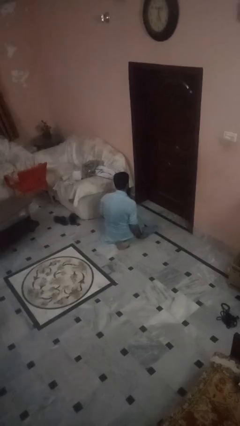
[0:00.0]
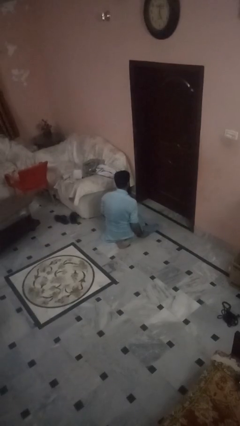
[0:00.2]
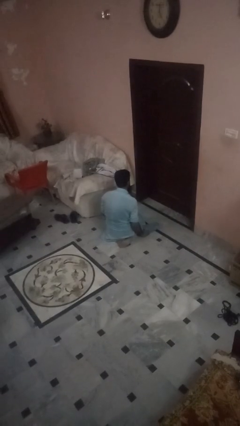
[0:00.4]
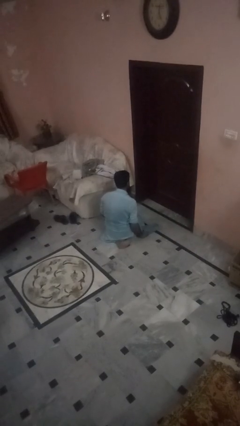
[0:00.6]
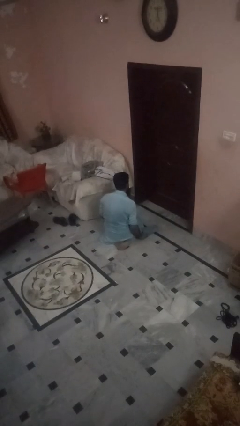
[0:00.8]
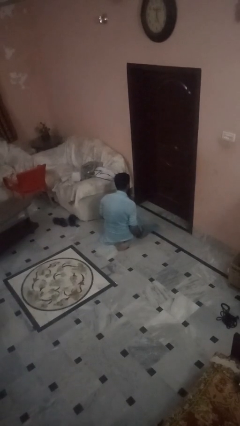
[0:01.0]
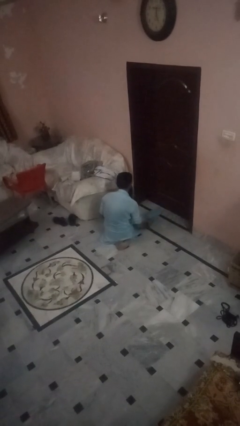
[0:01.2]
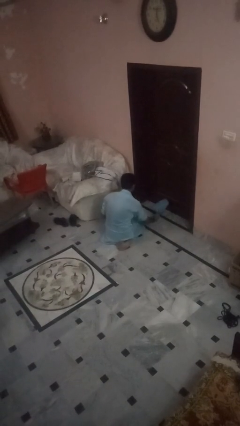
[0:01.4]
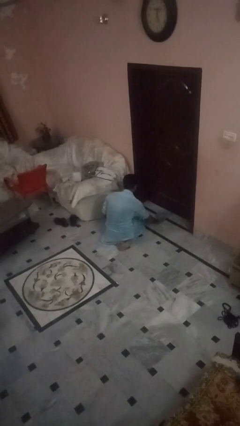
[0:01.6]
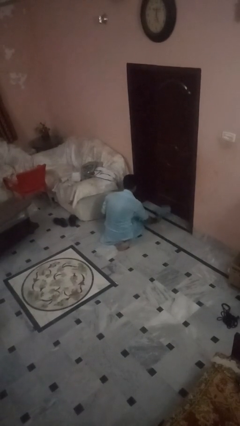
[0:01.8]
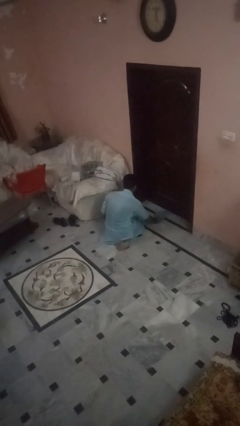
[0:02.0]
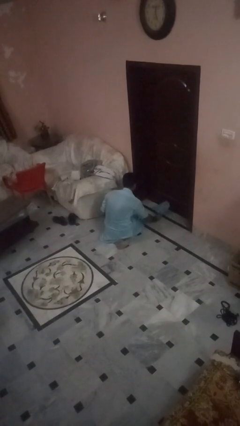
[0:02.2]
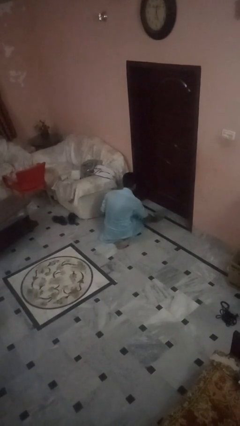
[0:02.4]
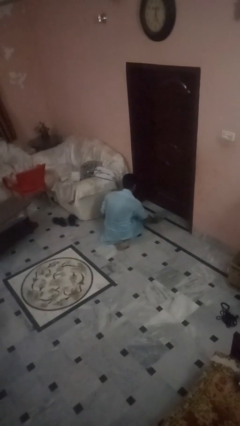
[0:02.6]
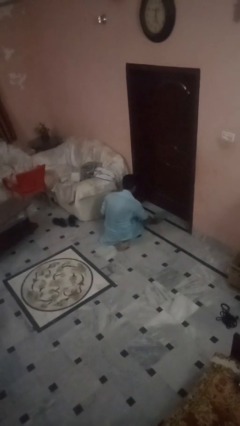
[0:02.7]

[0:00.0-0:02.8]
person swats bug

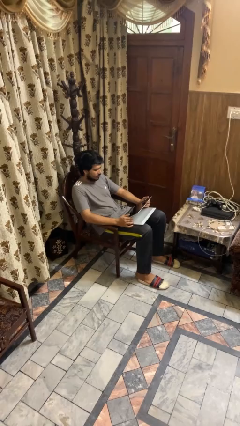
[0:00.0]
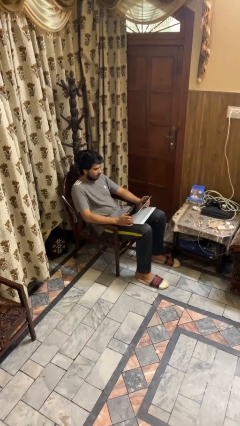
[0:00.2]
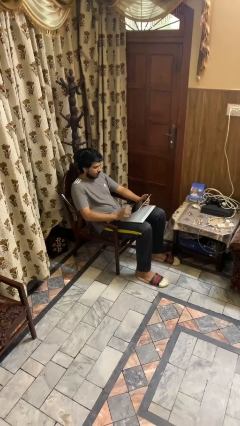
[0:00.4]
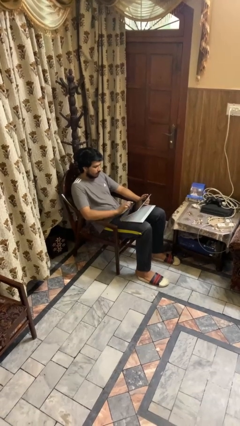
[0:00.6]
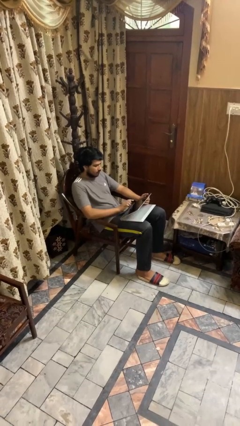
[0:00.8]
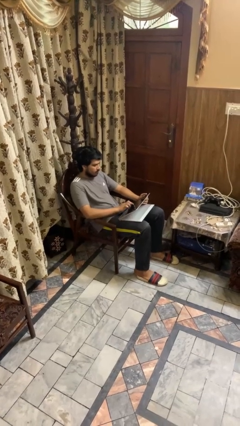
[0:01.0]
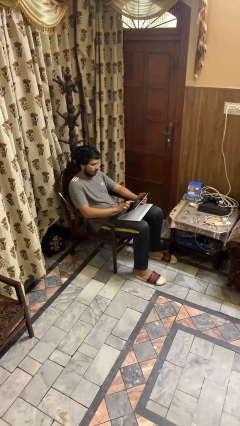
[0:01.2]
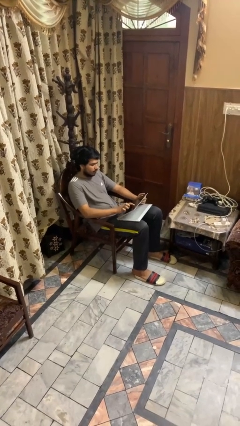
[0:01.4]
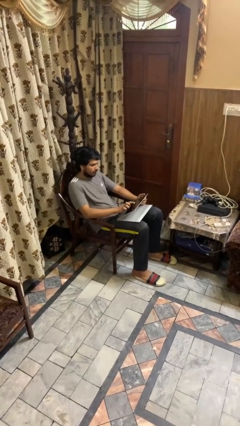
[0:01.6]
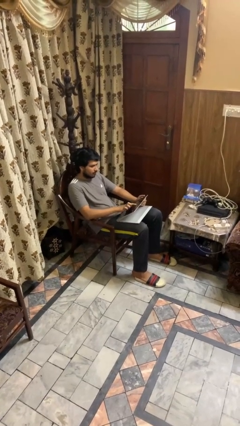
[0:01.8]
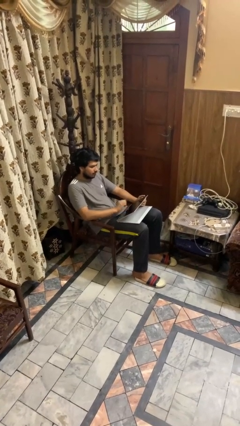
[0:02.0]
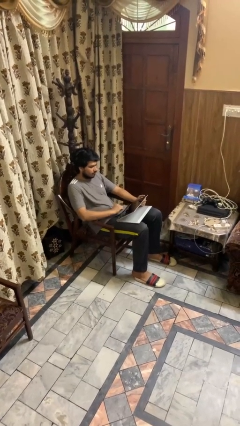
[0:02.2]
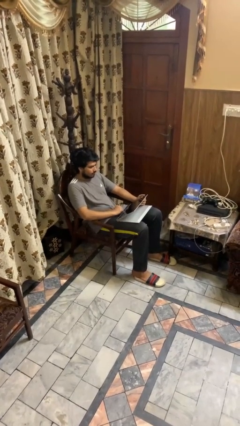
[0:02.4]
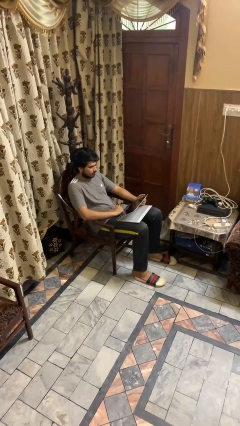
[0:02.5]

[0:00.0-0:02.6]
person interacts with tablet

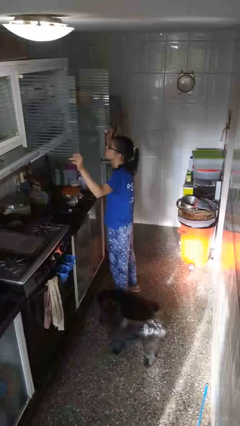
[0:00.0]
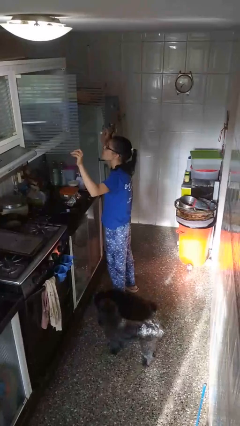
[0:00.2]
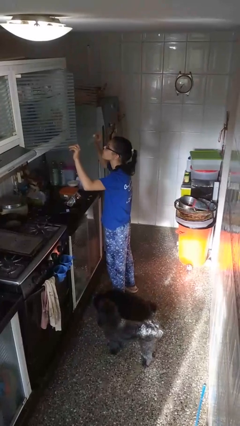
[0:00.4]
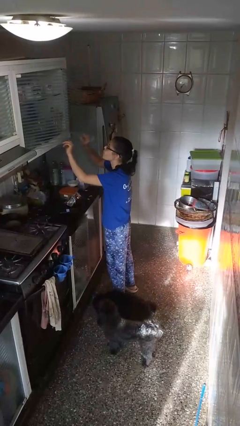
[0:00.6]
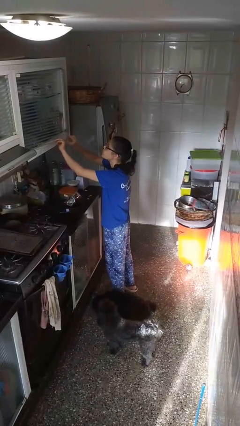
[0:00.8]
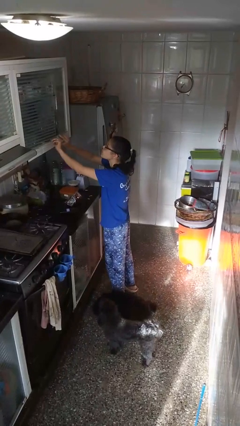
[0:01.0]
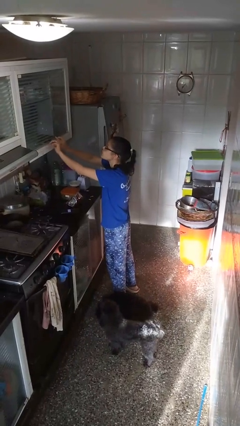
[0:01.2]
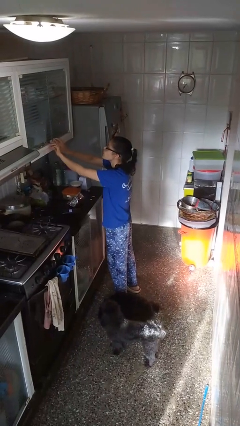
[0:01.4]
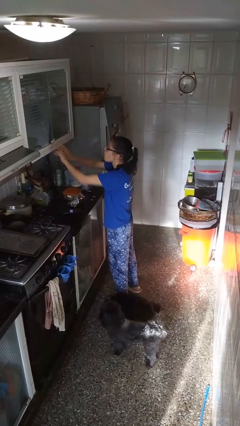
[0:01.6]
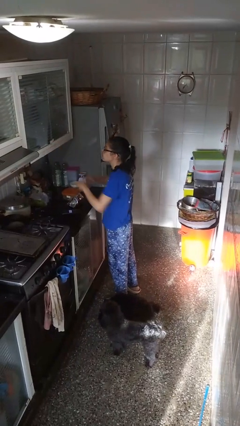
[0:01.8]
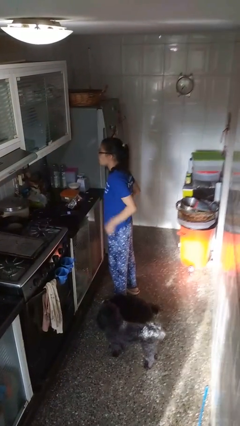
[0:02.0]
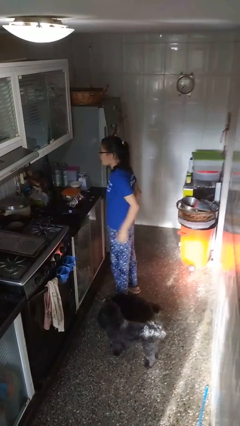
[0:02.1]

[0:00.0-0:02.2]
person closes cabinet

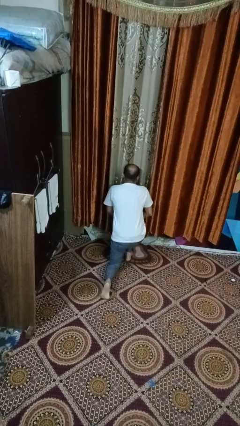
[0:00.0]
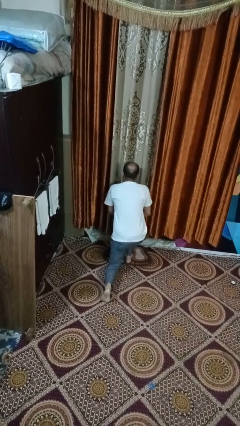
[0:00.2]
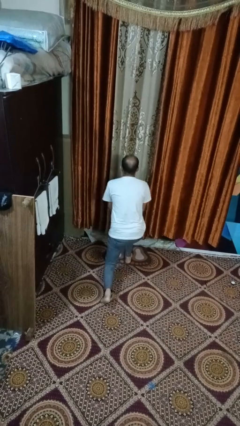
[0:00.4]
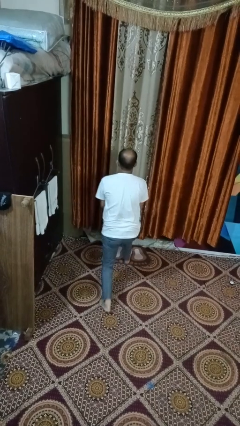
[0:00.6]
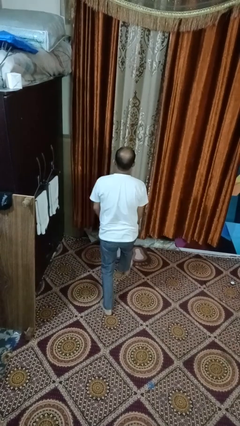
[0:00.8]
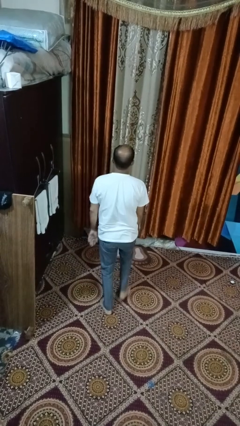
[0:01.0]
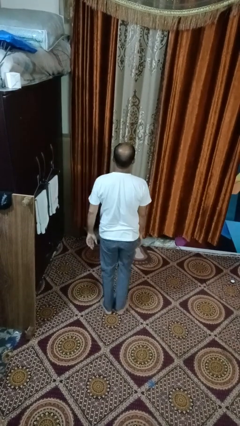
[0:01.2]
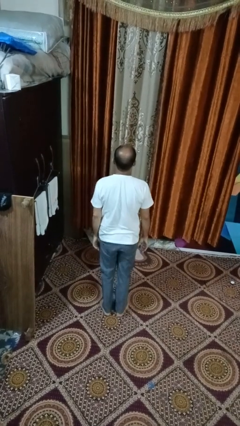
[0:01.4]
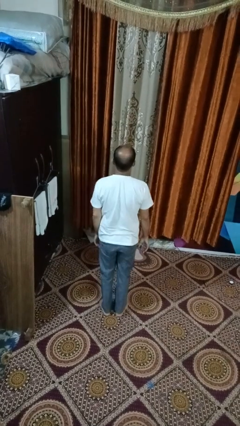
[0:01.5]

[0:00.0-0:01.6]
person stands up from floor

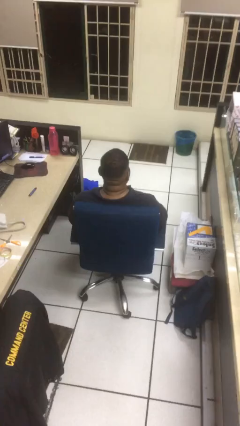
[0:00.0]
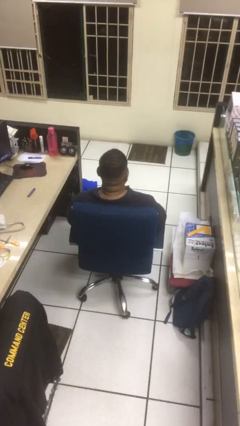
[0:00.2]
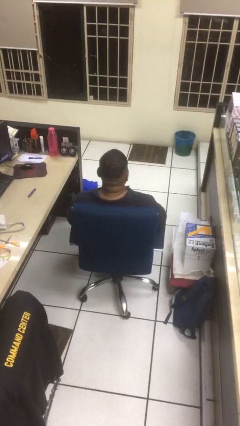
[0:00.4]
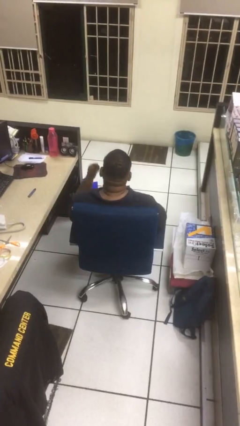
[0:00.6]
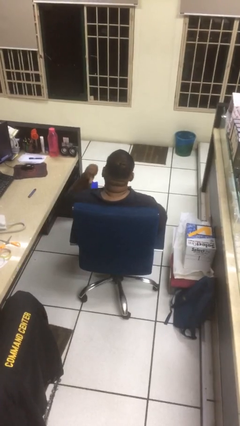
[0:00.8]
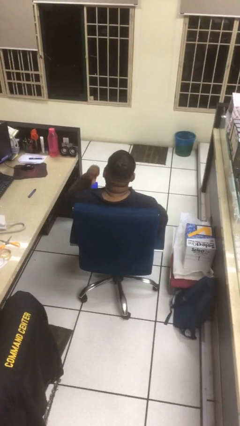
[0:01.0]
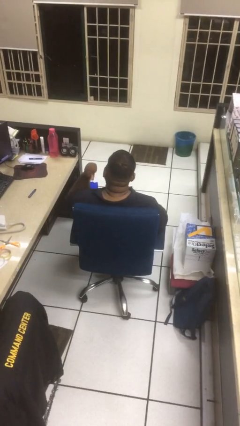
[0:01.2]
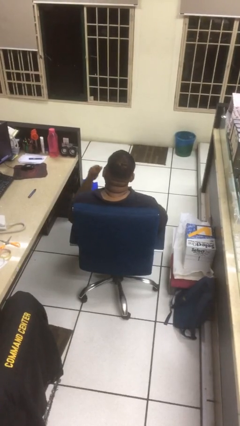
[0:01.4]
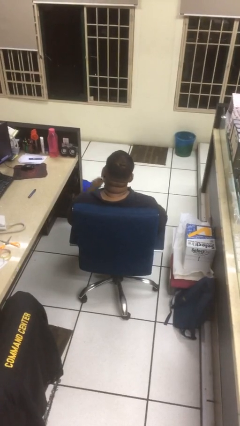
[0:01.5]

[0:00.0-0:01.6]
person gestures behind me

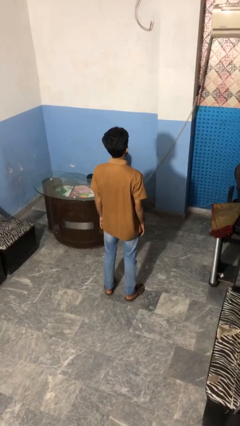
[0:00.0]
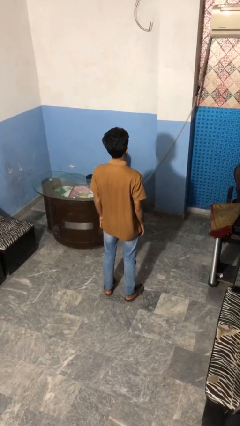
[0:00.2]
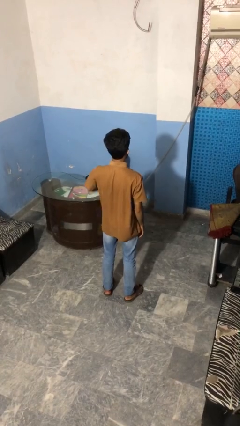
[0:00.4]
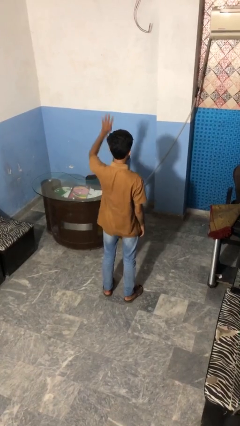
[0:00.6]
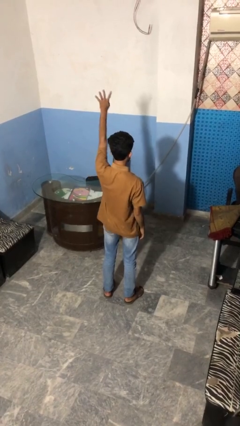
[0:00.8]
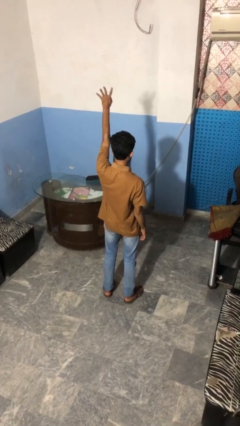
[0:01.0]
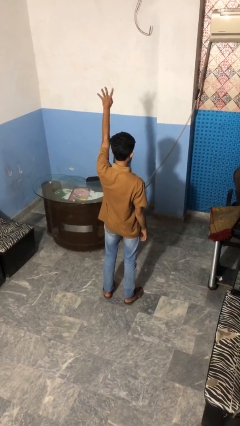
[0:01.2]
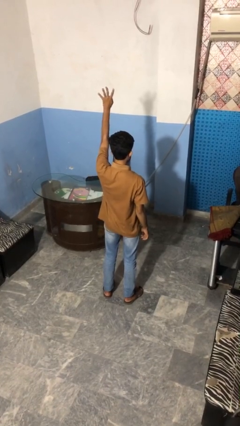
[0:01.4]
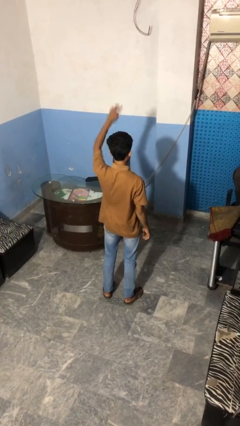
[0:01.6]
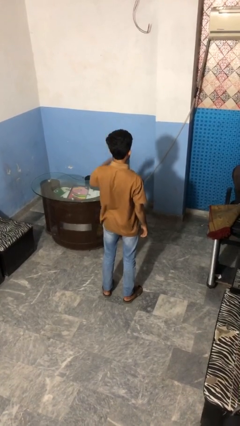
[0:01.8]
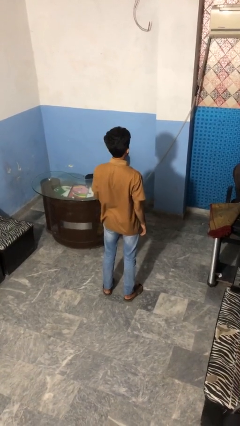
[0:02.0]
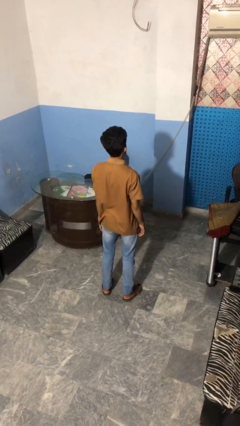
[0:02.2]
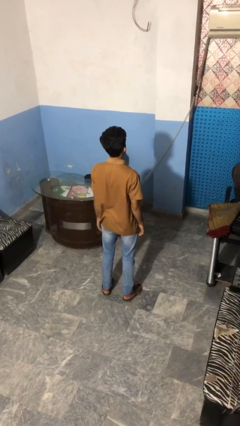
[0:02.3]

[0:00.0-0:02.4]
person gestures number four

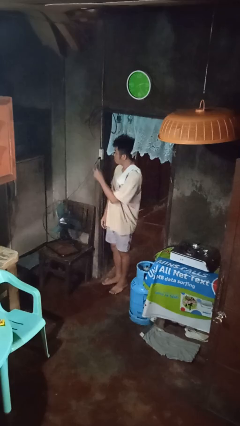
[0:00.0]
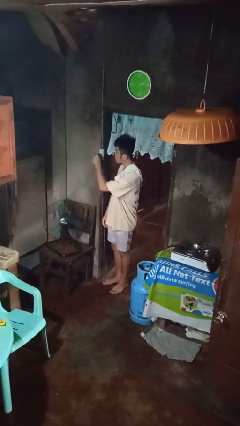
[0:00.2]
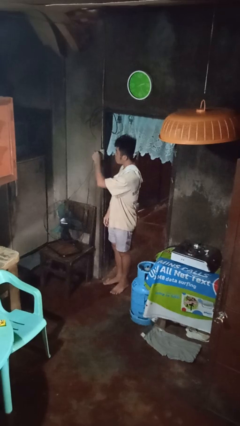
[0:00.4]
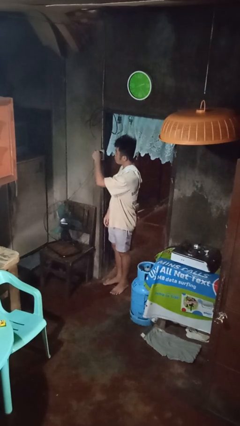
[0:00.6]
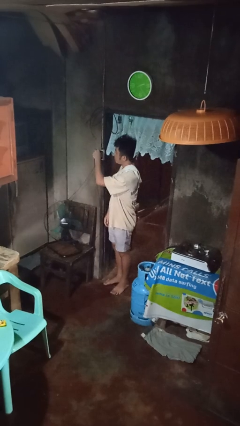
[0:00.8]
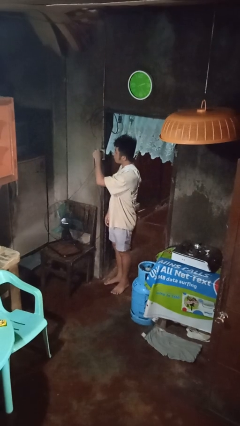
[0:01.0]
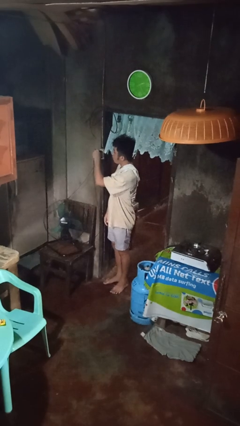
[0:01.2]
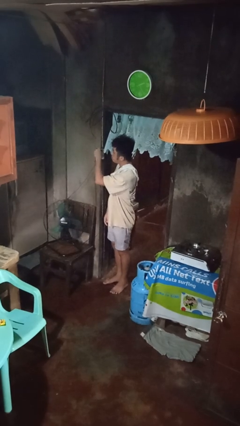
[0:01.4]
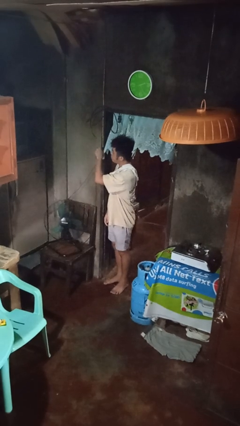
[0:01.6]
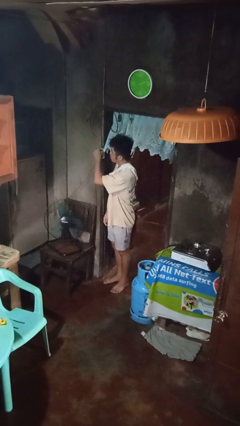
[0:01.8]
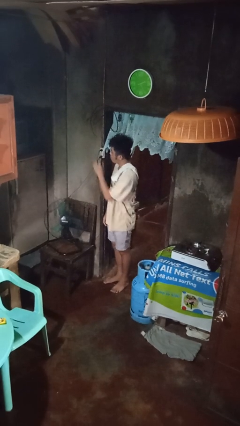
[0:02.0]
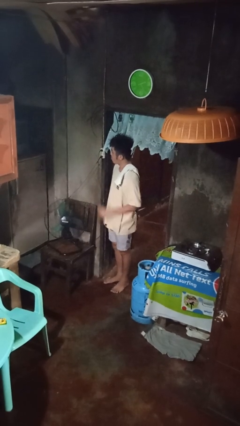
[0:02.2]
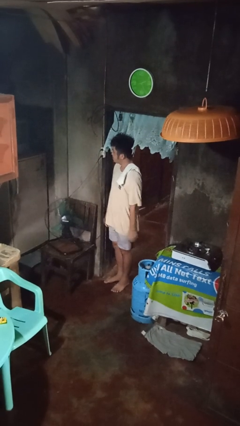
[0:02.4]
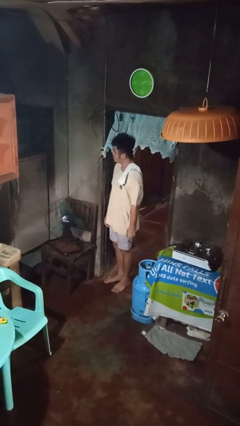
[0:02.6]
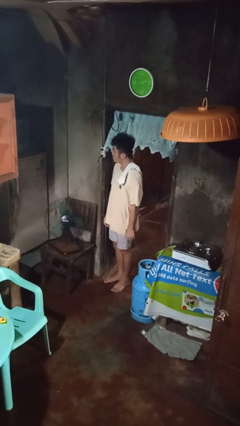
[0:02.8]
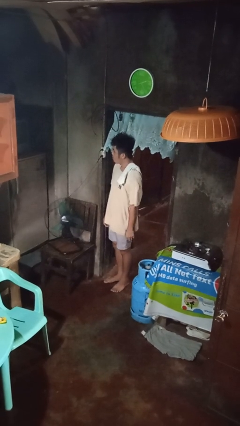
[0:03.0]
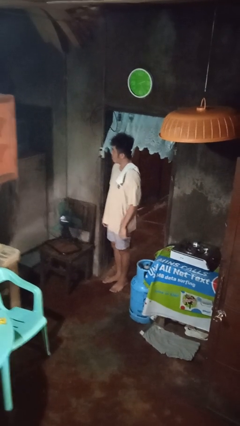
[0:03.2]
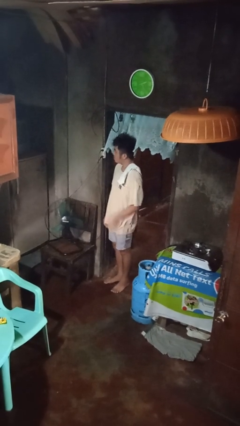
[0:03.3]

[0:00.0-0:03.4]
person plugs into electrical socket
